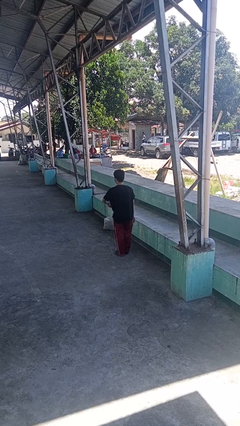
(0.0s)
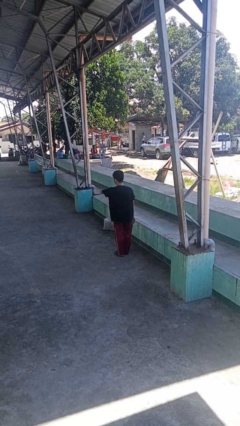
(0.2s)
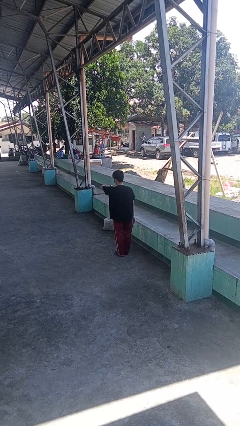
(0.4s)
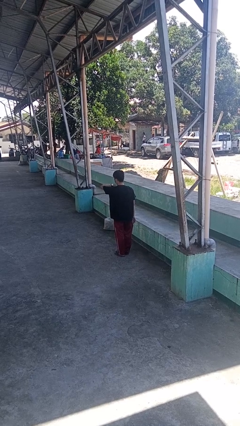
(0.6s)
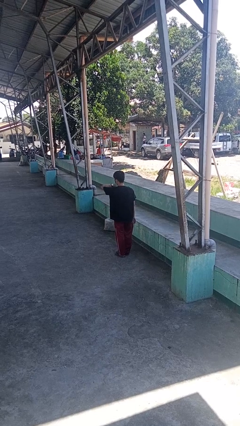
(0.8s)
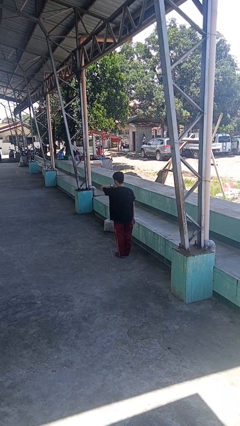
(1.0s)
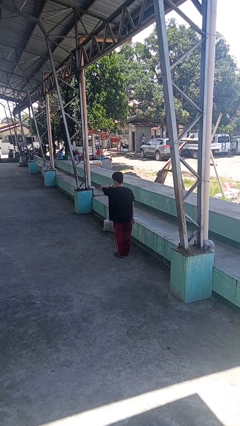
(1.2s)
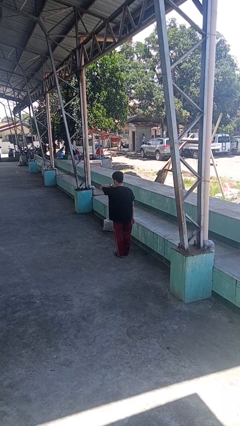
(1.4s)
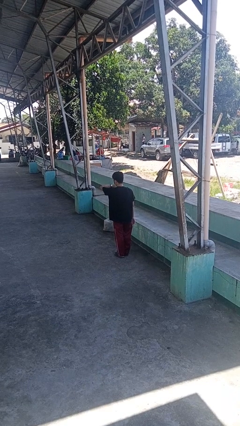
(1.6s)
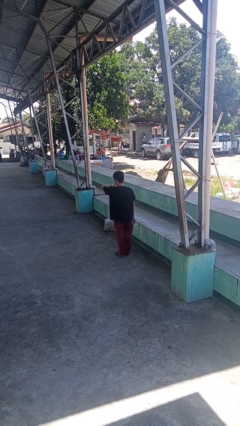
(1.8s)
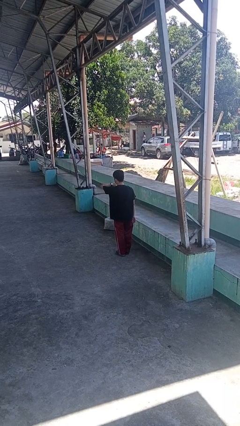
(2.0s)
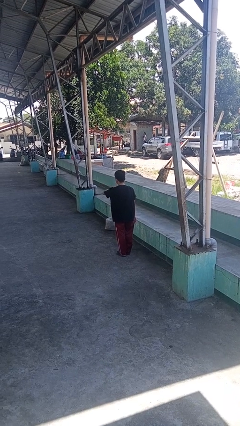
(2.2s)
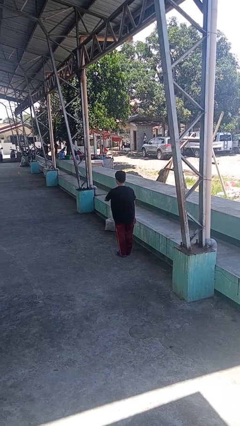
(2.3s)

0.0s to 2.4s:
person looks at wristwatch

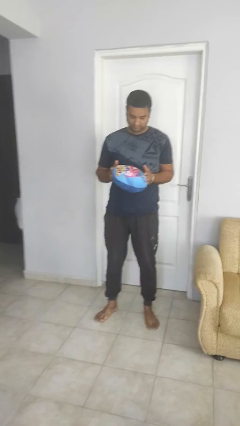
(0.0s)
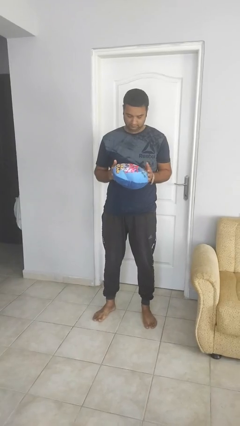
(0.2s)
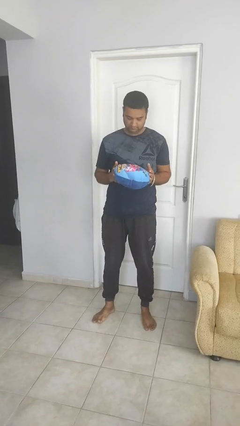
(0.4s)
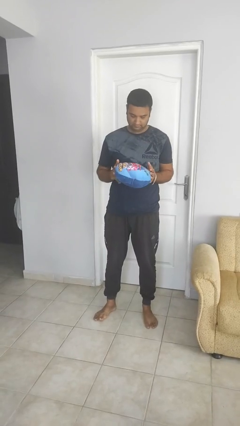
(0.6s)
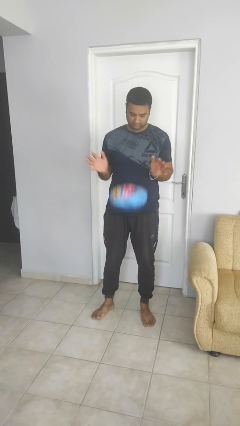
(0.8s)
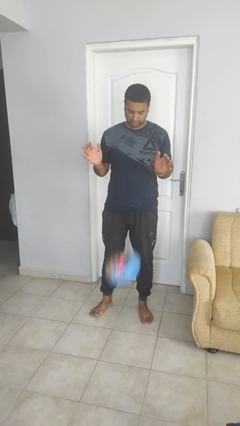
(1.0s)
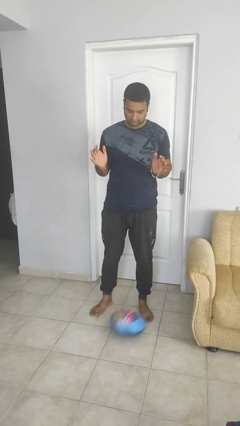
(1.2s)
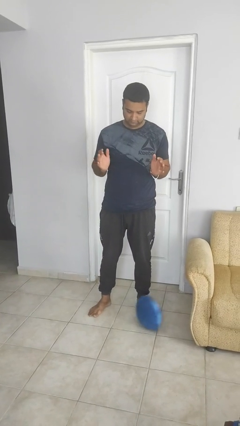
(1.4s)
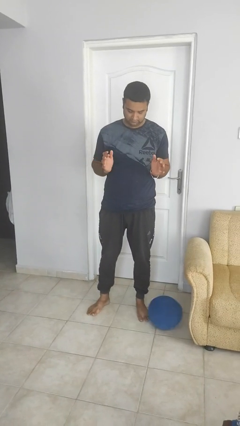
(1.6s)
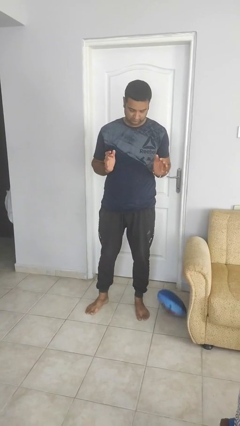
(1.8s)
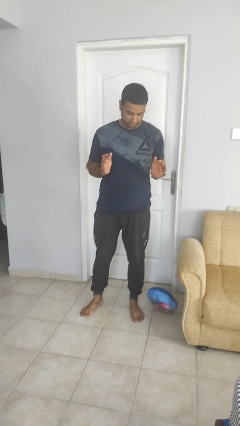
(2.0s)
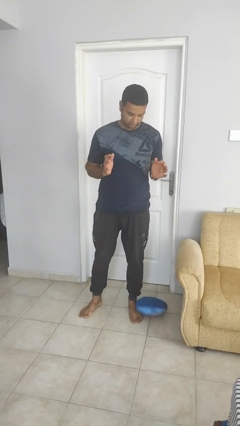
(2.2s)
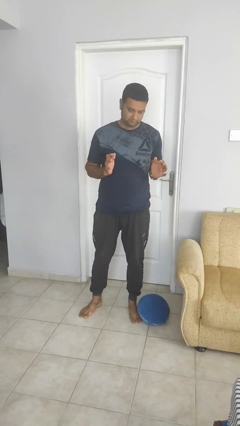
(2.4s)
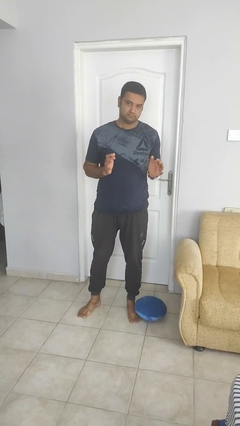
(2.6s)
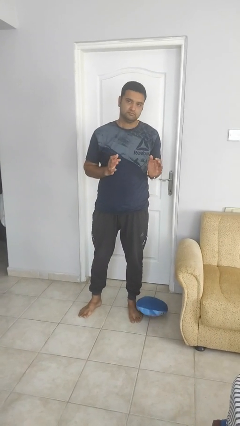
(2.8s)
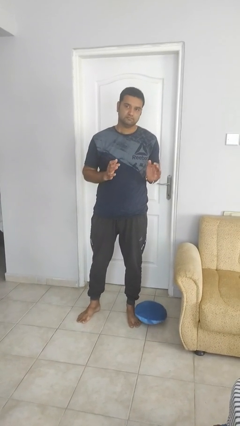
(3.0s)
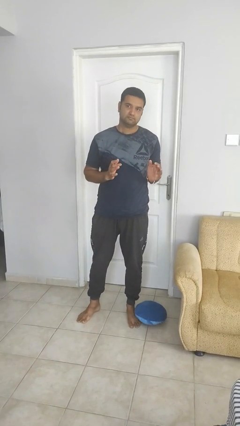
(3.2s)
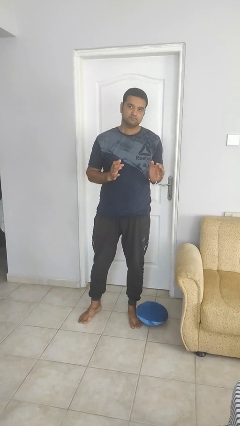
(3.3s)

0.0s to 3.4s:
person drops object

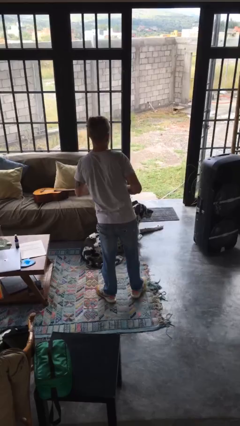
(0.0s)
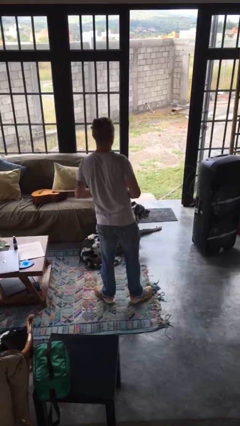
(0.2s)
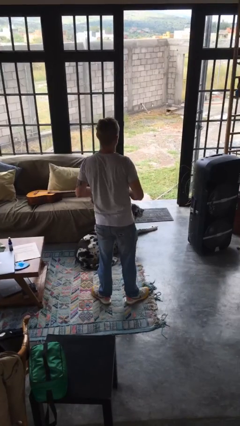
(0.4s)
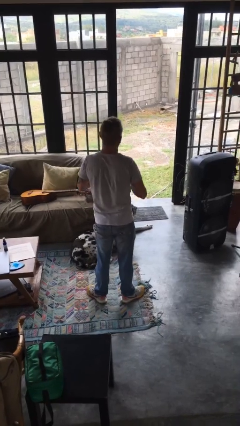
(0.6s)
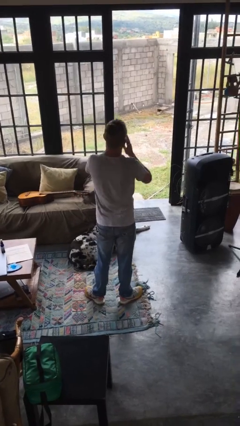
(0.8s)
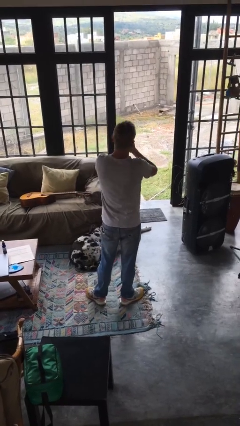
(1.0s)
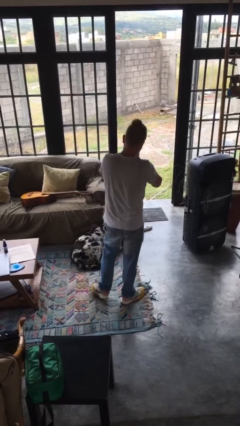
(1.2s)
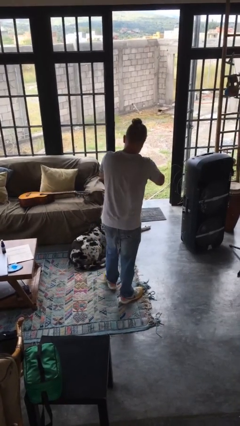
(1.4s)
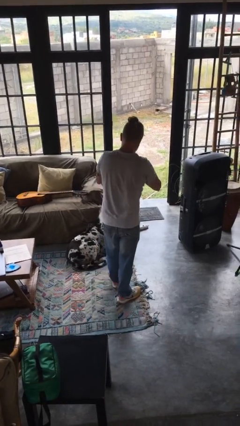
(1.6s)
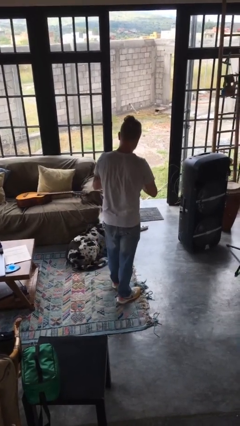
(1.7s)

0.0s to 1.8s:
person sneezes into hand

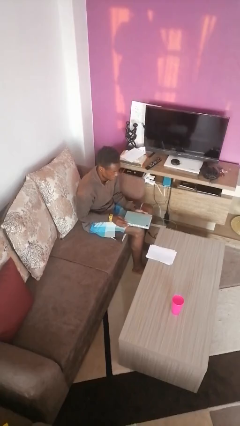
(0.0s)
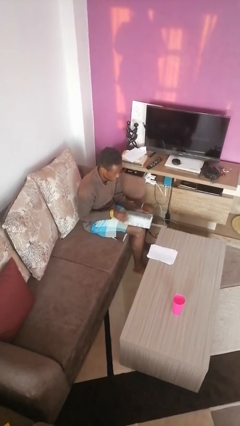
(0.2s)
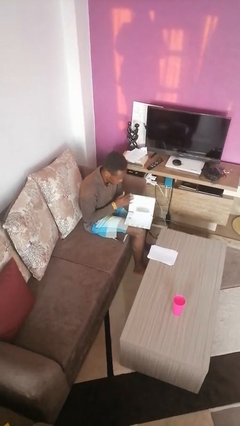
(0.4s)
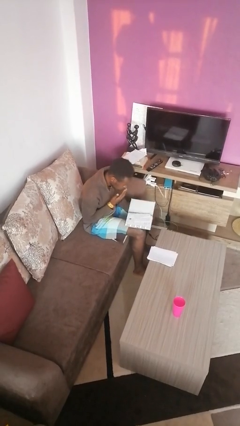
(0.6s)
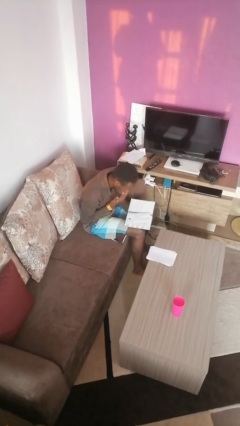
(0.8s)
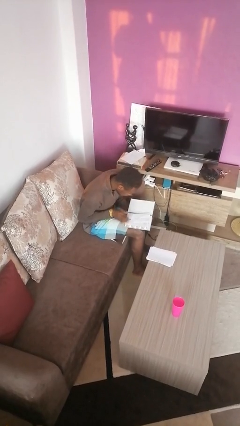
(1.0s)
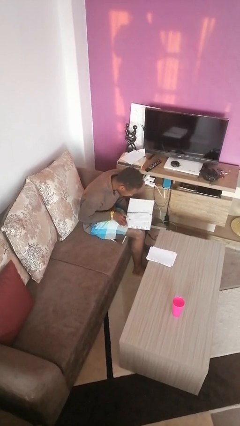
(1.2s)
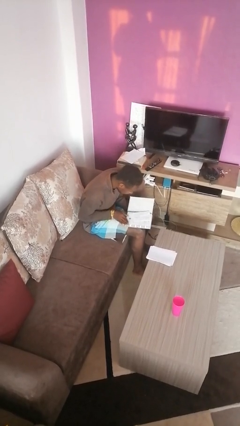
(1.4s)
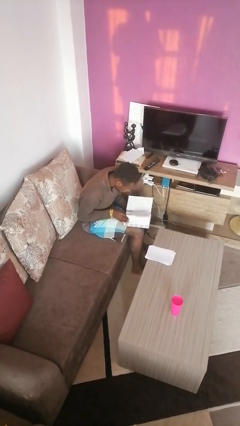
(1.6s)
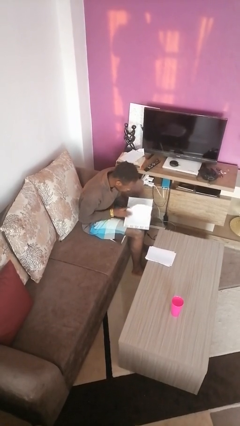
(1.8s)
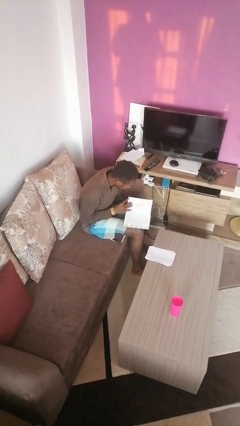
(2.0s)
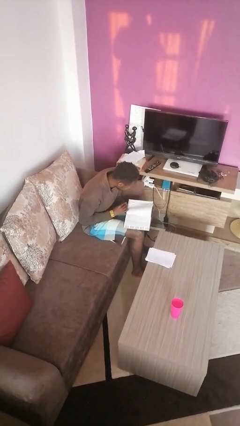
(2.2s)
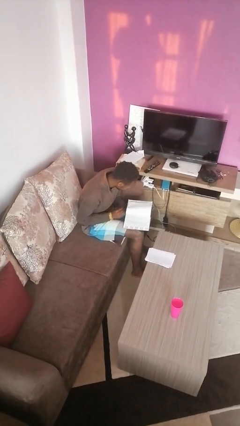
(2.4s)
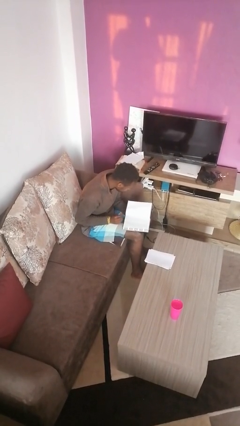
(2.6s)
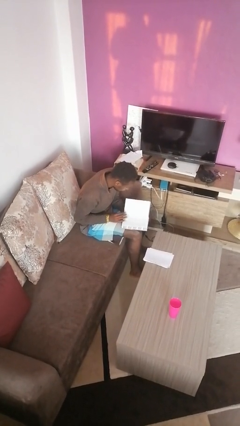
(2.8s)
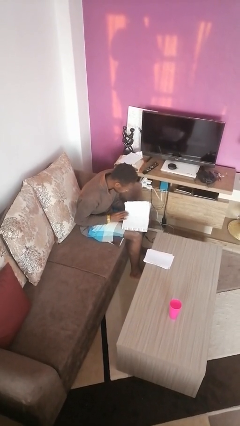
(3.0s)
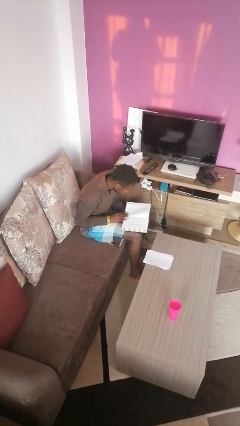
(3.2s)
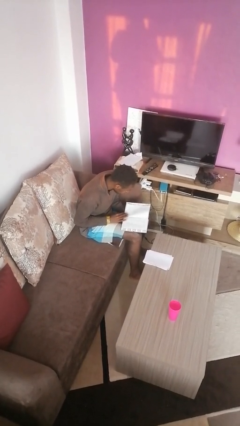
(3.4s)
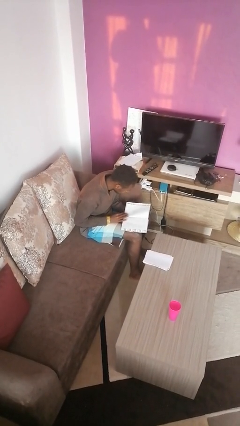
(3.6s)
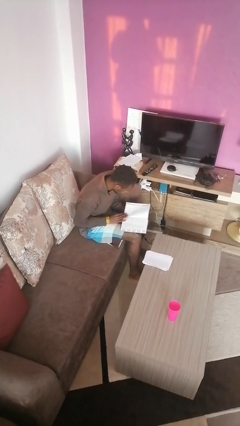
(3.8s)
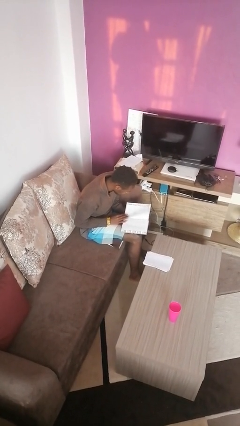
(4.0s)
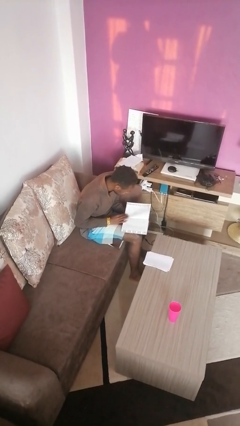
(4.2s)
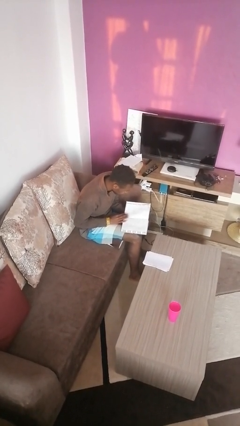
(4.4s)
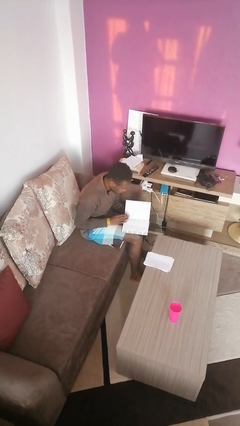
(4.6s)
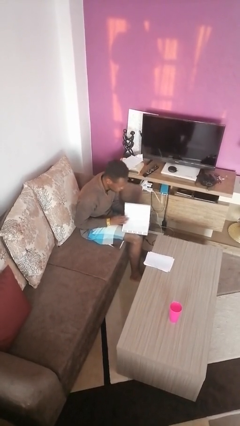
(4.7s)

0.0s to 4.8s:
person reads book

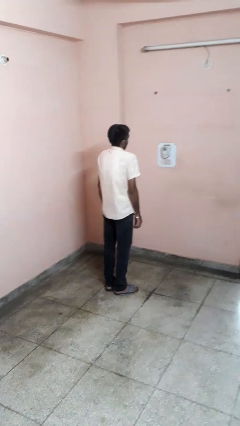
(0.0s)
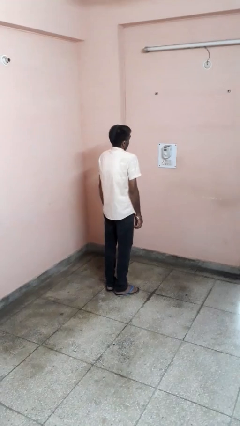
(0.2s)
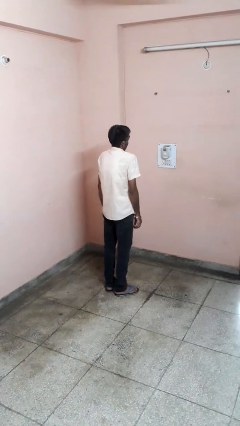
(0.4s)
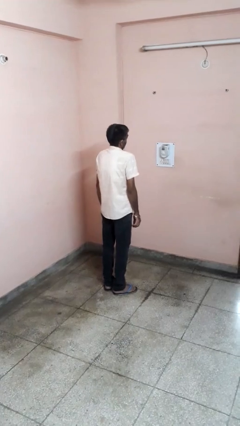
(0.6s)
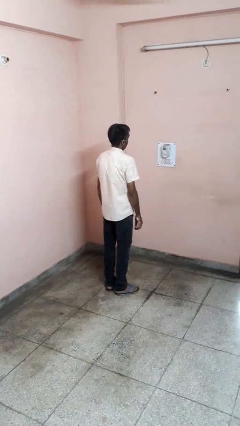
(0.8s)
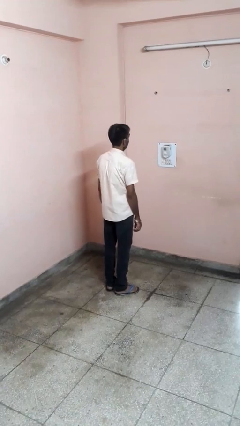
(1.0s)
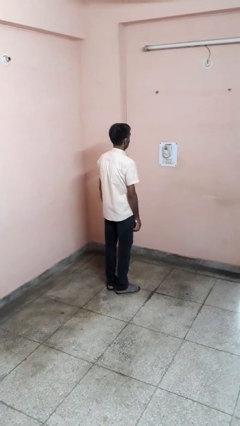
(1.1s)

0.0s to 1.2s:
person shrugs

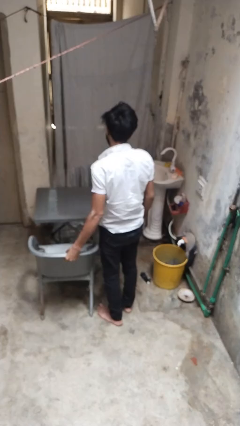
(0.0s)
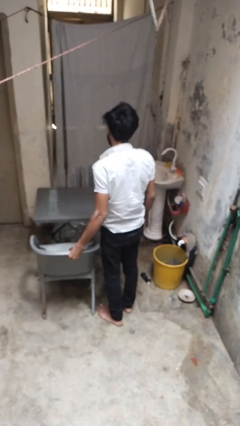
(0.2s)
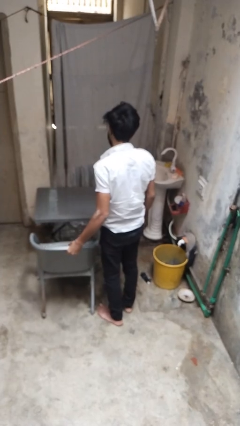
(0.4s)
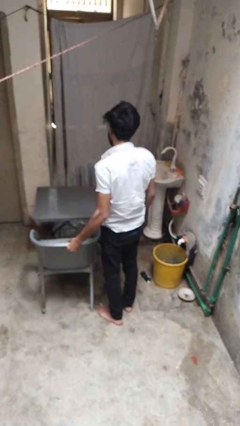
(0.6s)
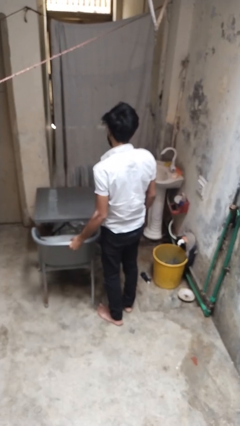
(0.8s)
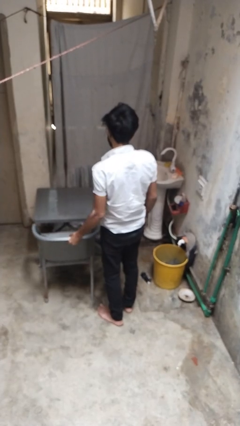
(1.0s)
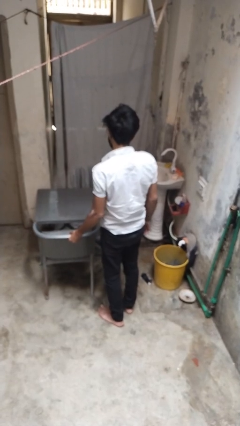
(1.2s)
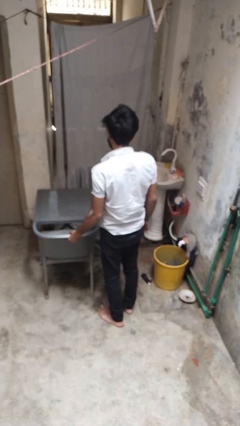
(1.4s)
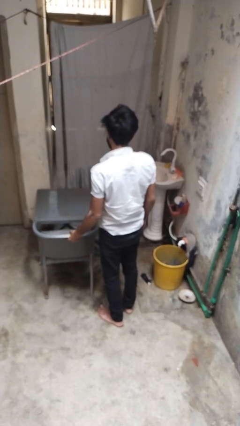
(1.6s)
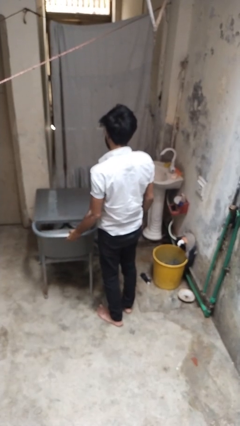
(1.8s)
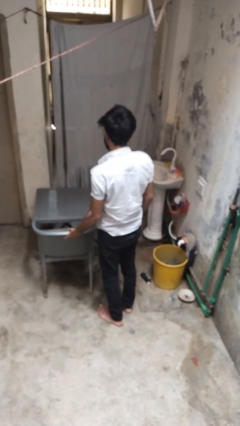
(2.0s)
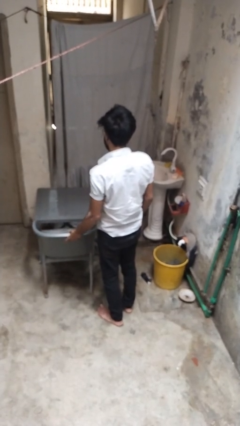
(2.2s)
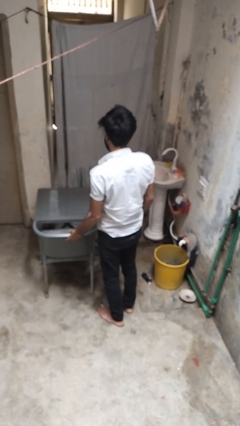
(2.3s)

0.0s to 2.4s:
person pushes in chair

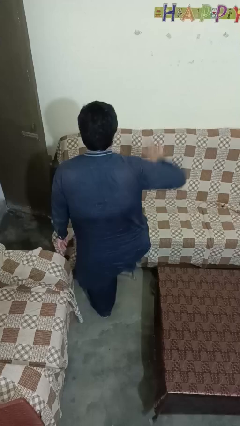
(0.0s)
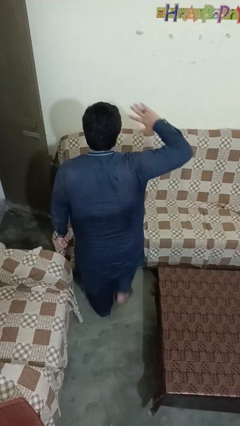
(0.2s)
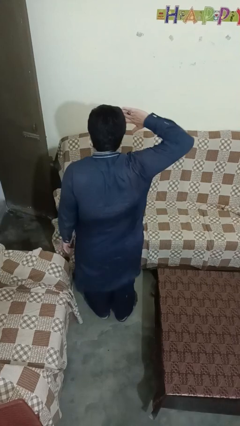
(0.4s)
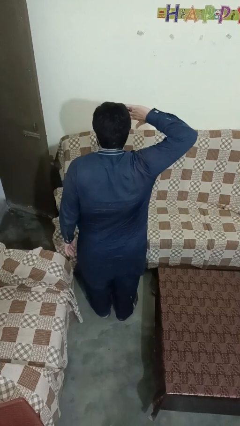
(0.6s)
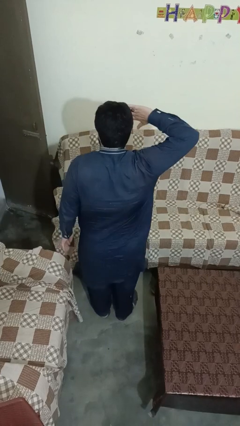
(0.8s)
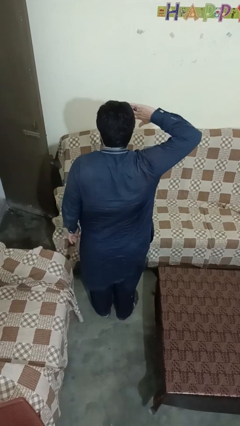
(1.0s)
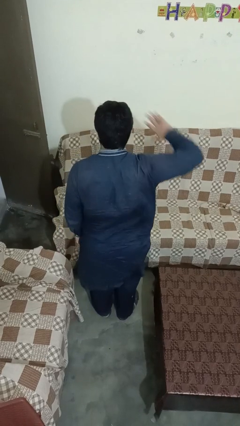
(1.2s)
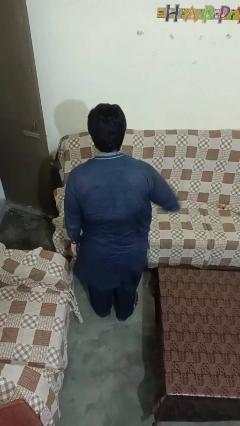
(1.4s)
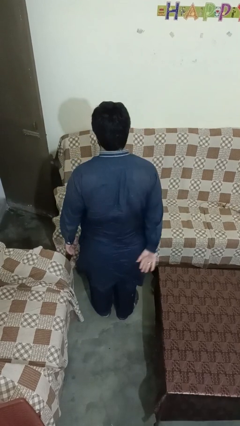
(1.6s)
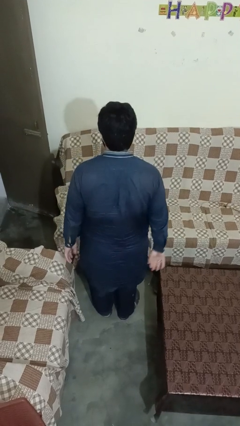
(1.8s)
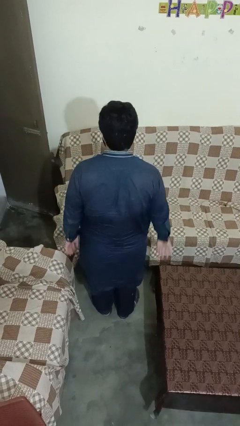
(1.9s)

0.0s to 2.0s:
person salutes
